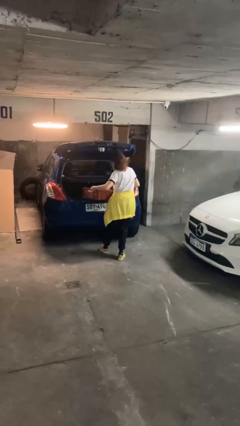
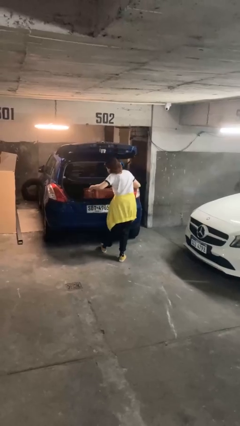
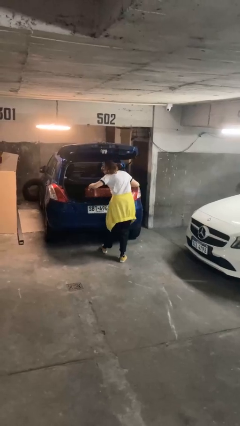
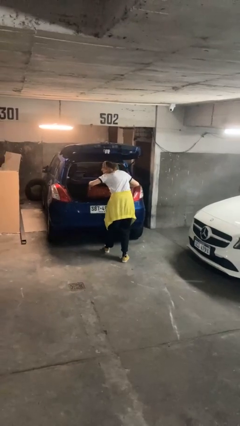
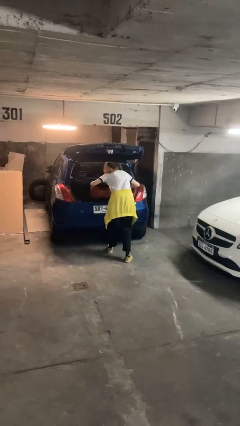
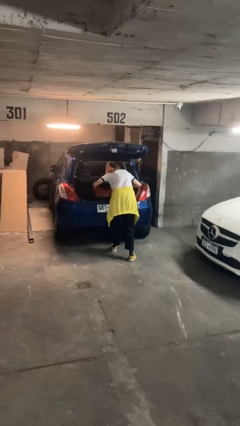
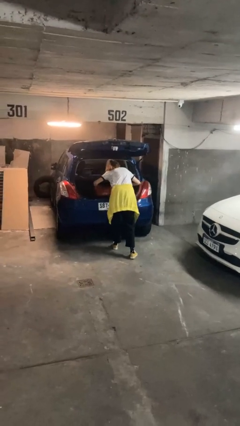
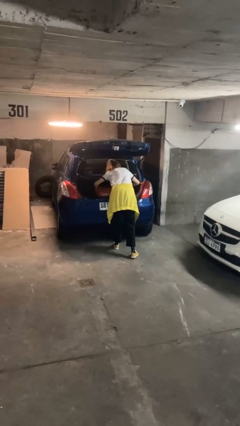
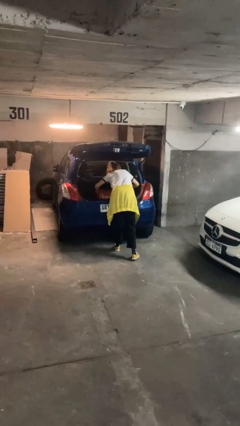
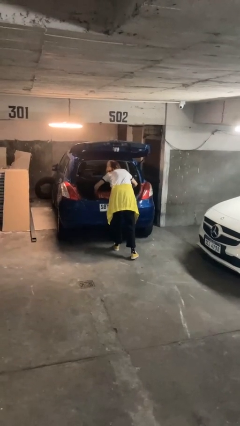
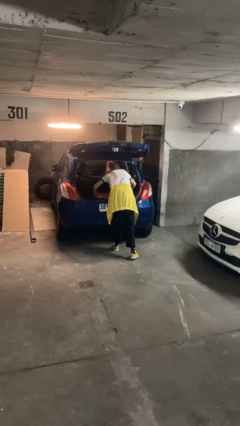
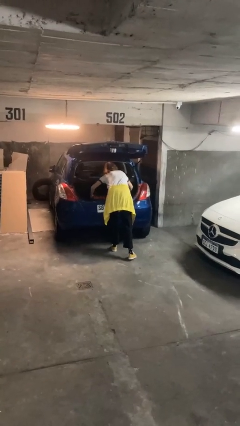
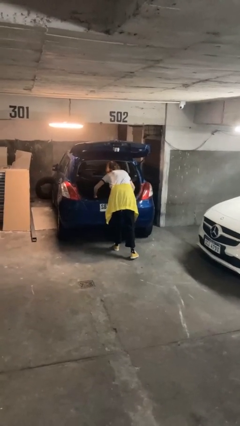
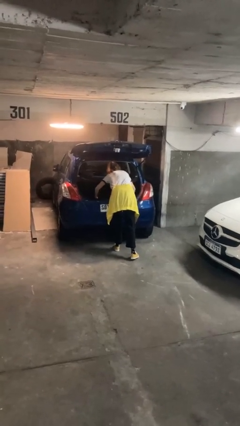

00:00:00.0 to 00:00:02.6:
person loads car

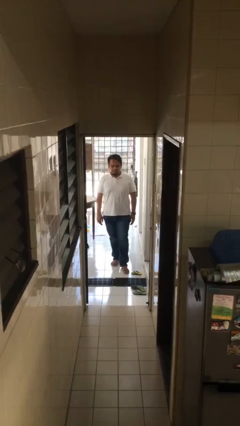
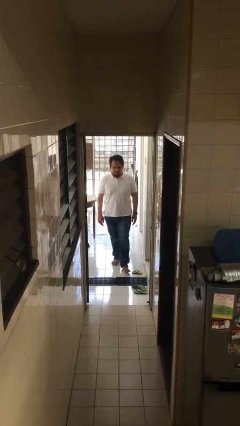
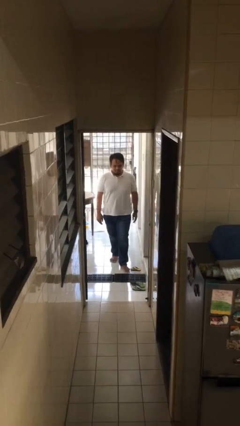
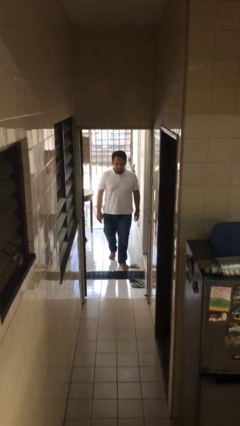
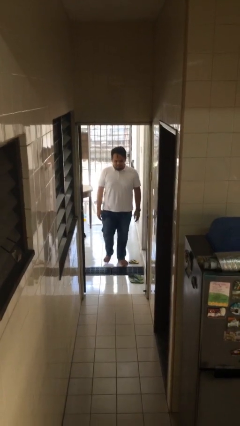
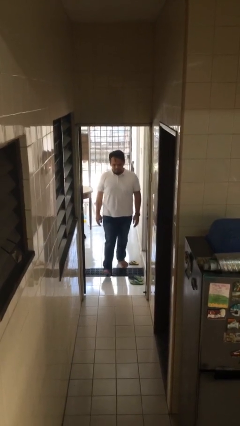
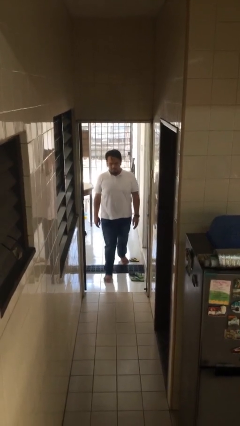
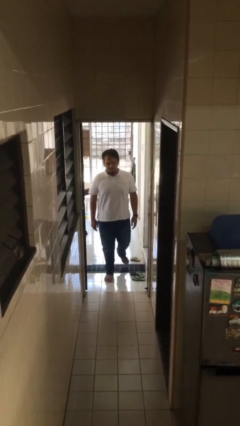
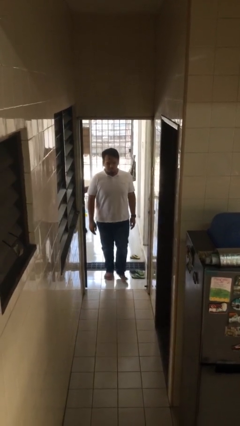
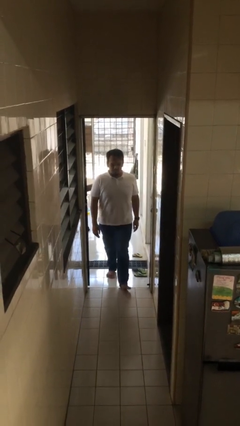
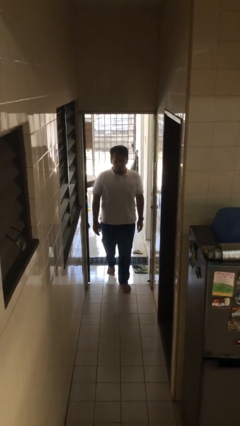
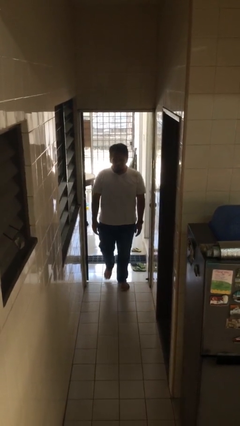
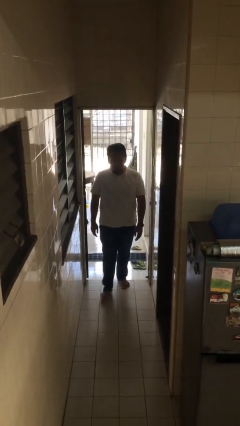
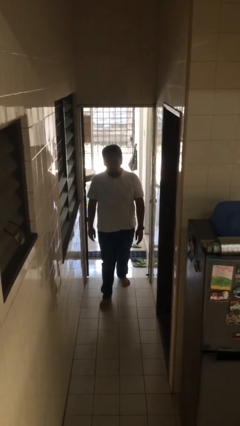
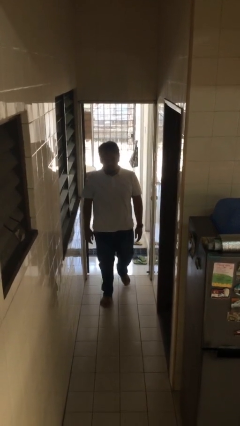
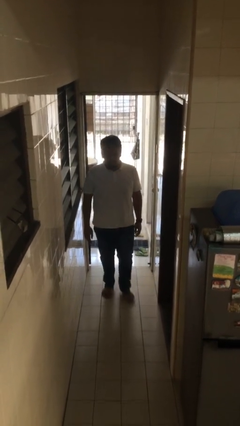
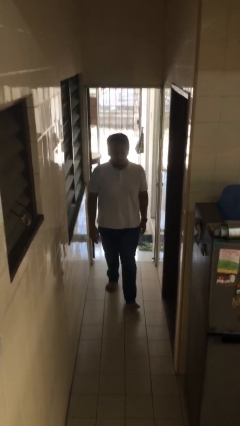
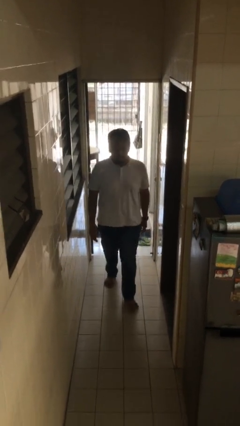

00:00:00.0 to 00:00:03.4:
person enters scene through structure

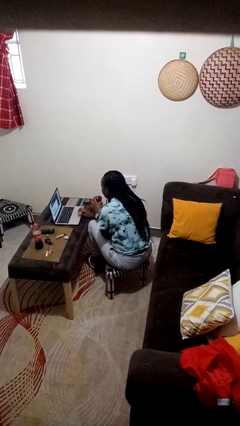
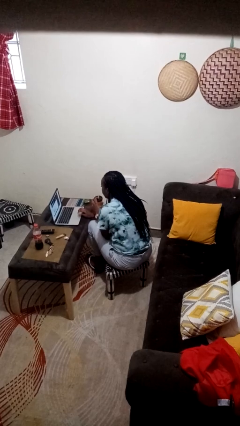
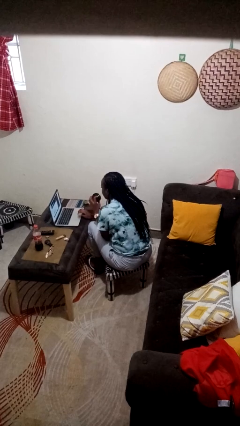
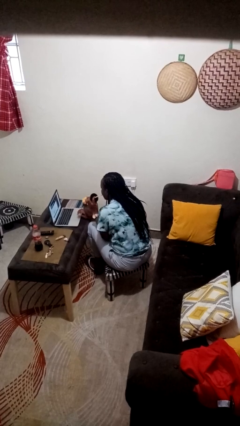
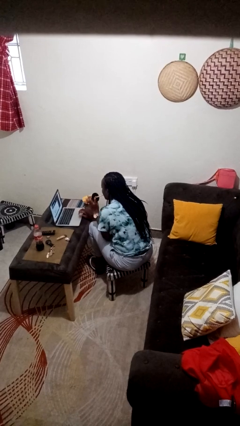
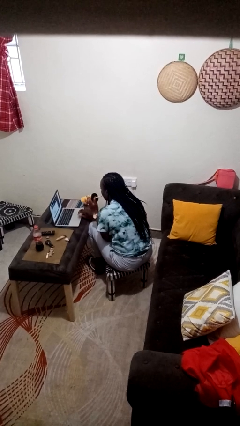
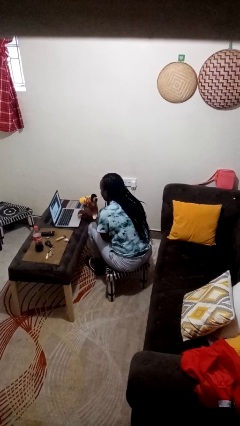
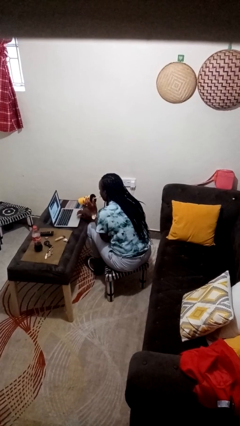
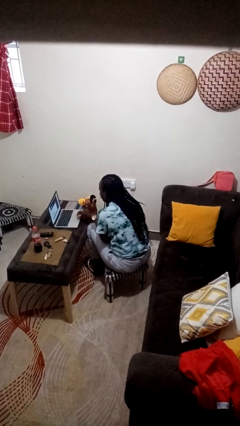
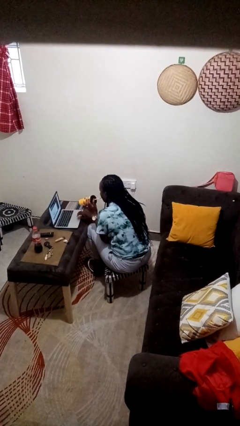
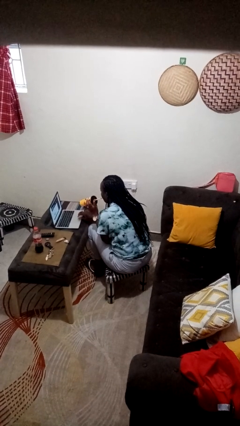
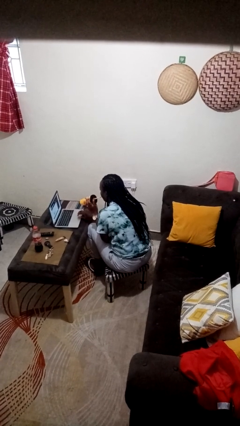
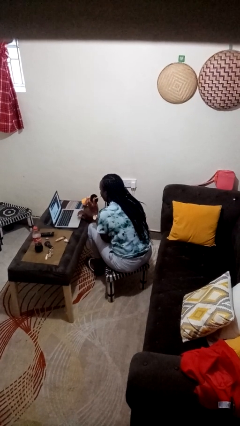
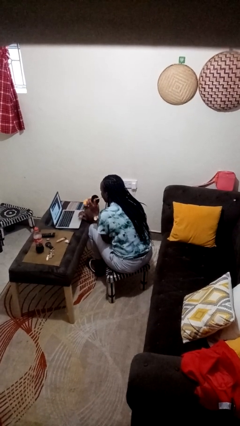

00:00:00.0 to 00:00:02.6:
person drinks from straw

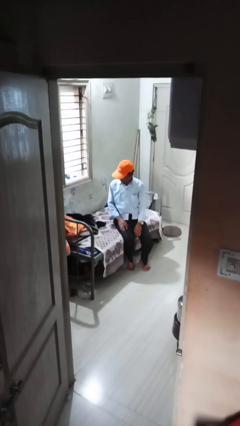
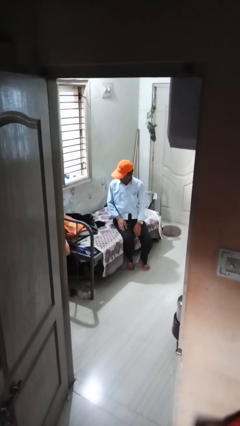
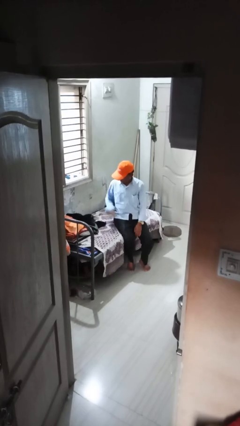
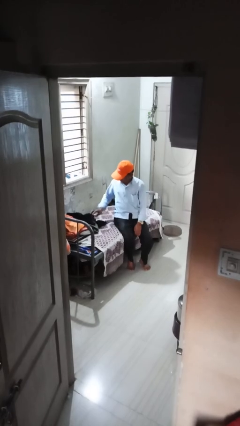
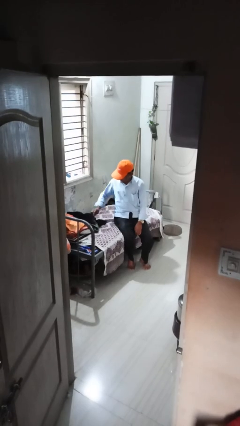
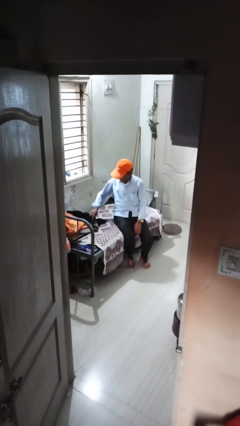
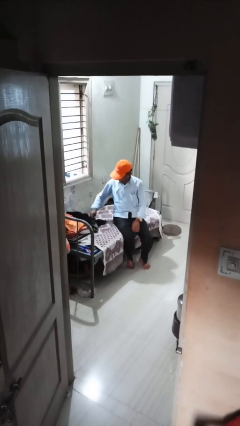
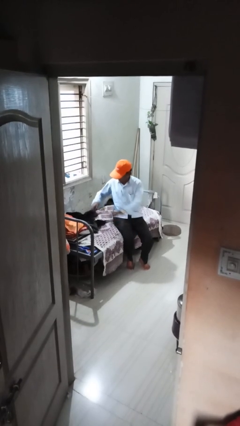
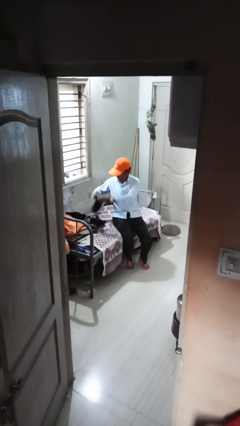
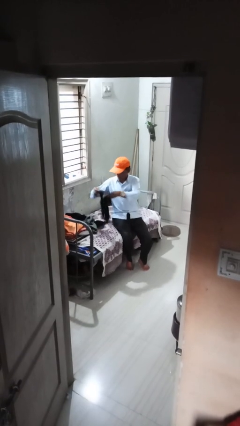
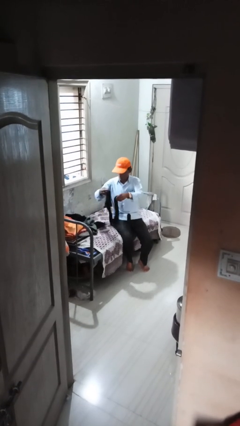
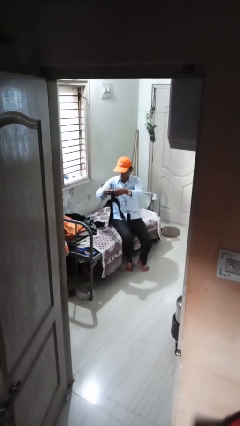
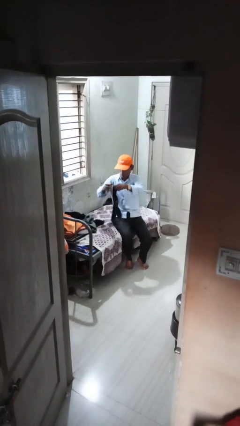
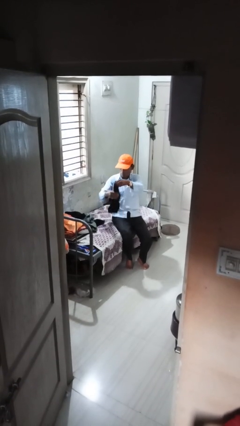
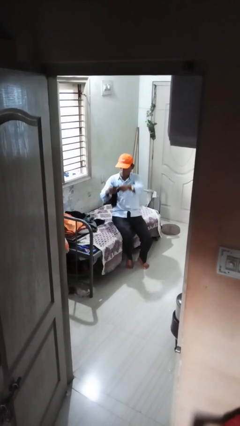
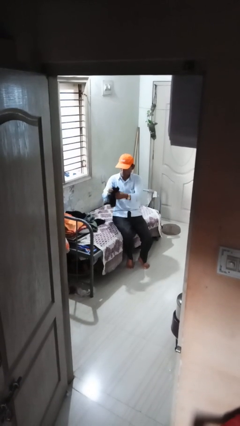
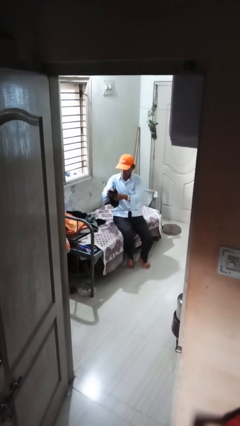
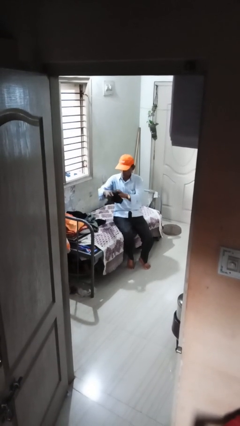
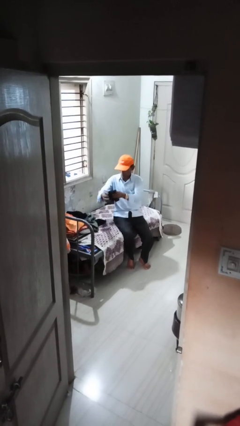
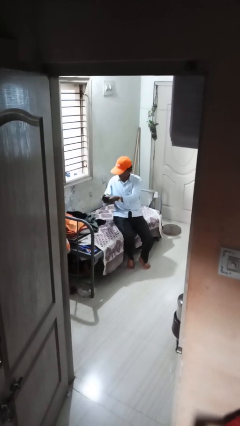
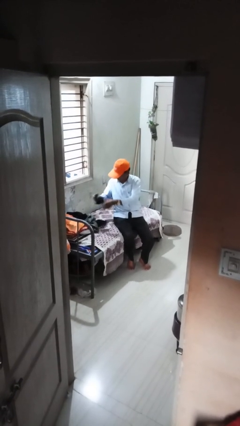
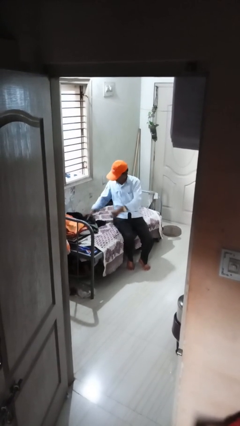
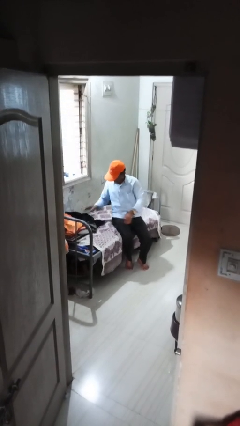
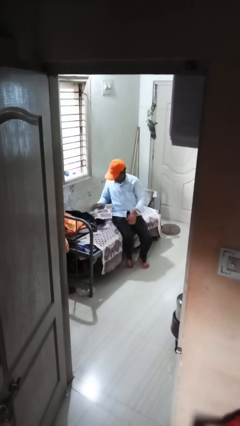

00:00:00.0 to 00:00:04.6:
person folds socks

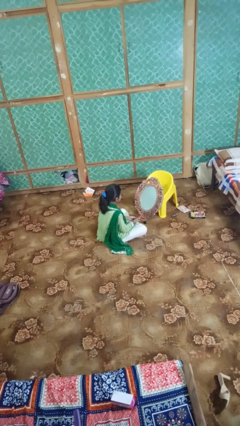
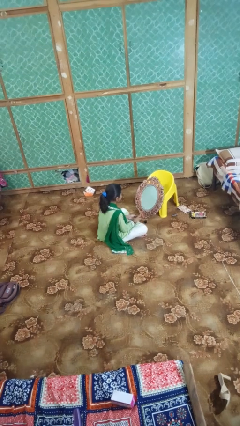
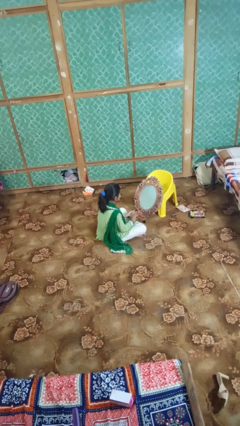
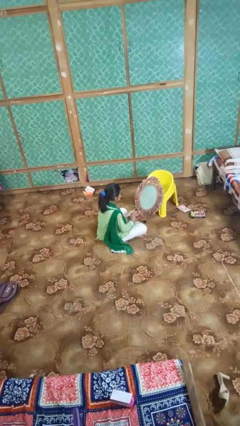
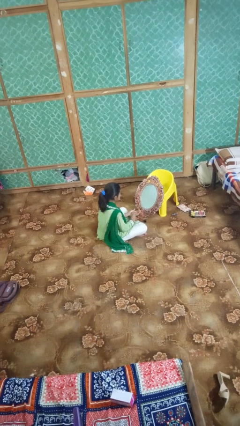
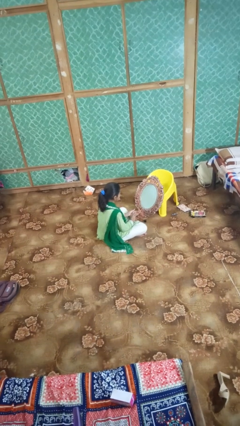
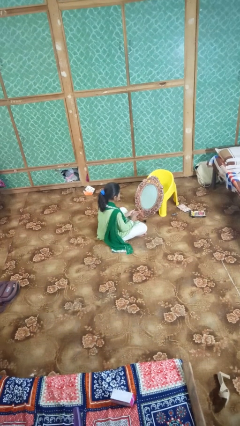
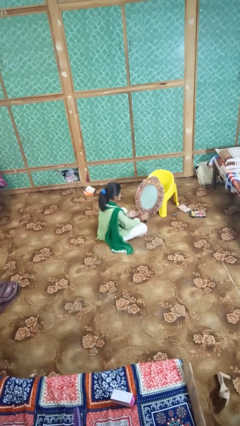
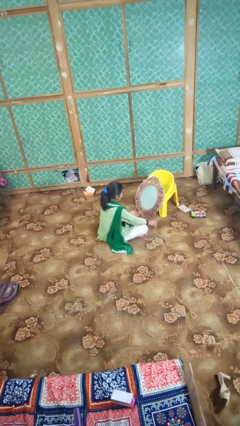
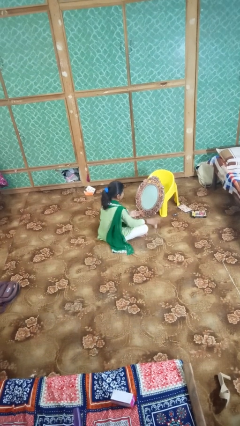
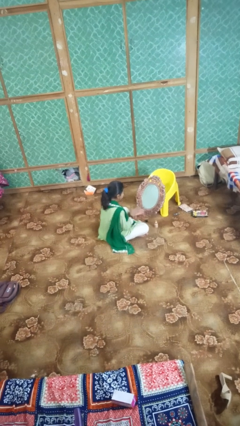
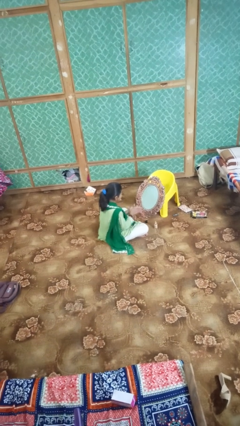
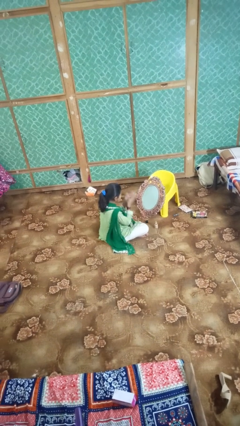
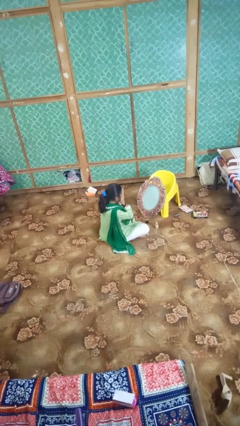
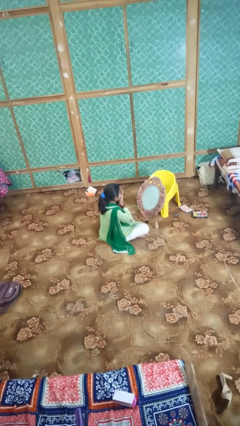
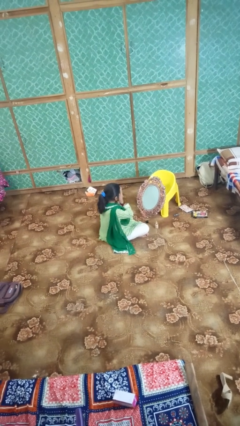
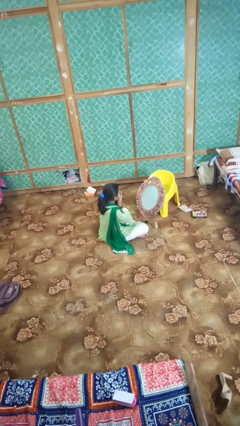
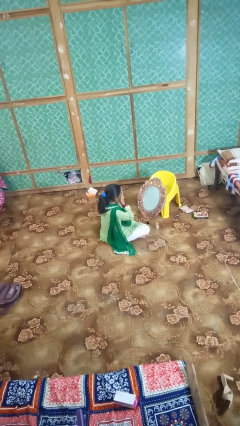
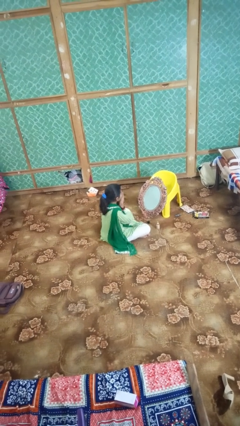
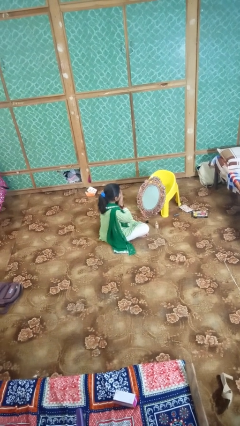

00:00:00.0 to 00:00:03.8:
person applies foundation makeup
